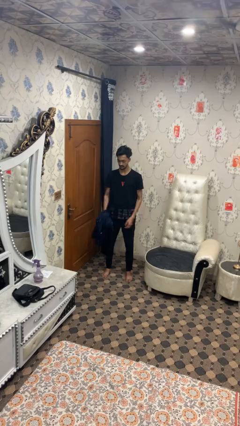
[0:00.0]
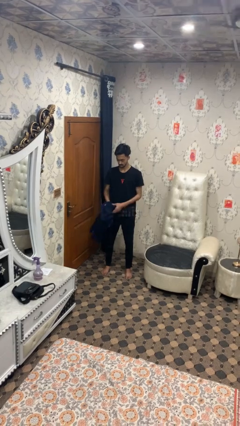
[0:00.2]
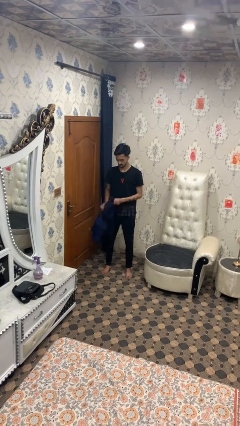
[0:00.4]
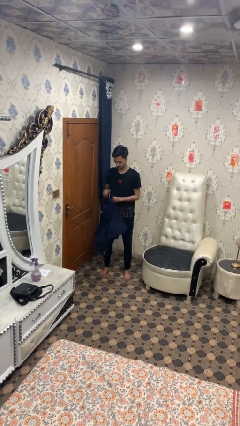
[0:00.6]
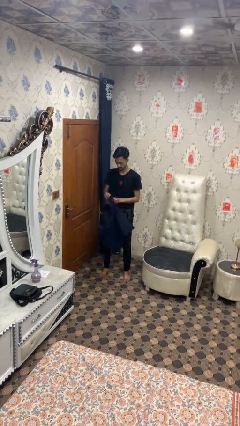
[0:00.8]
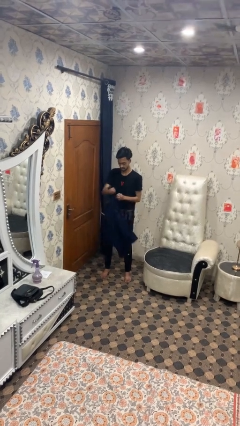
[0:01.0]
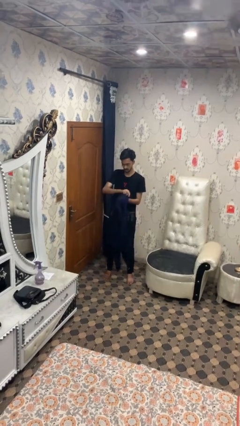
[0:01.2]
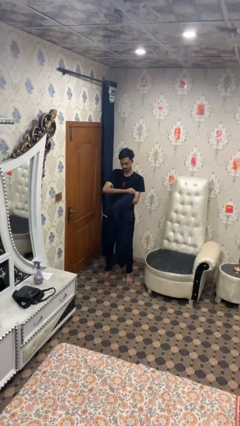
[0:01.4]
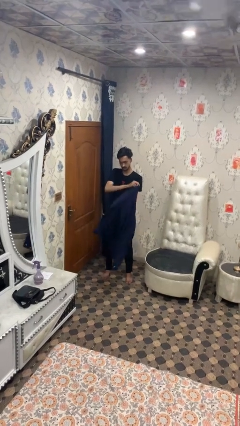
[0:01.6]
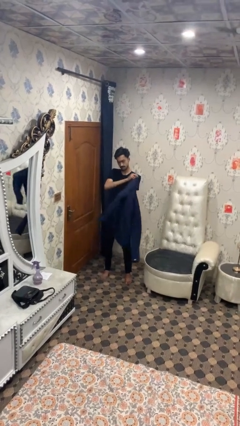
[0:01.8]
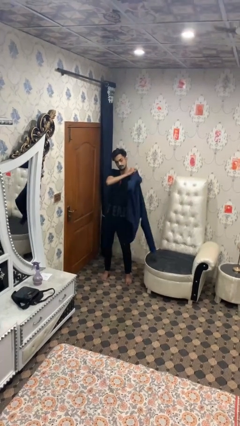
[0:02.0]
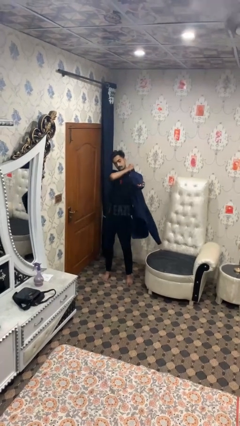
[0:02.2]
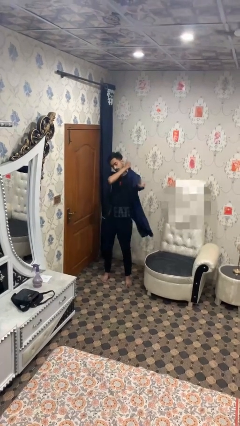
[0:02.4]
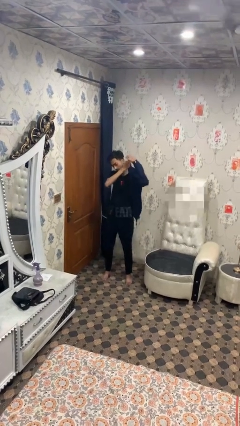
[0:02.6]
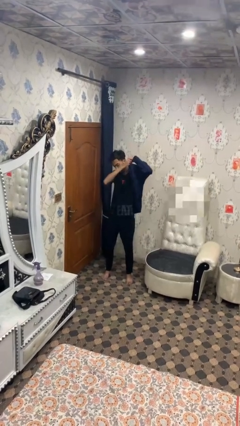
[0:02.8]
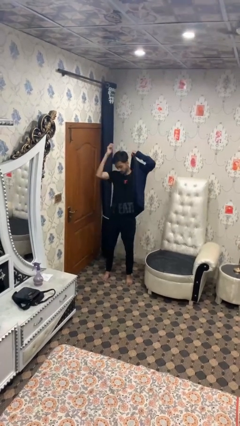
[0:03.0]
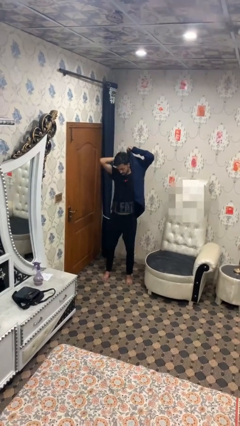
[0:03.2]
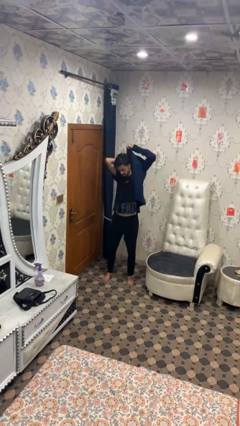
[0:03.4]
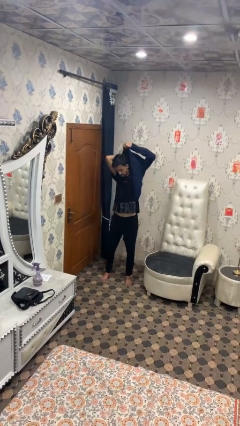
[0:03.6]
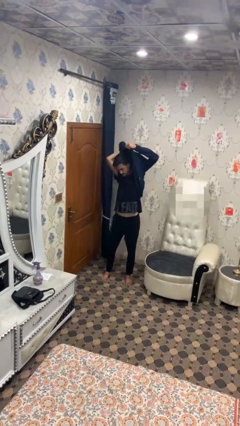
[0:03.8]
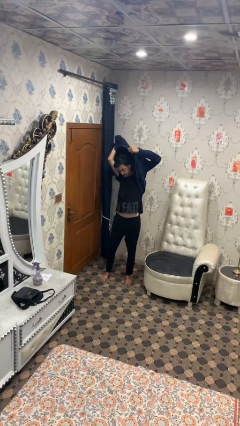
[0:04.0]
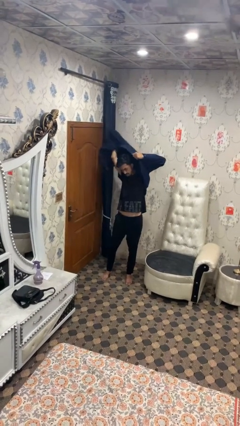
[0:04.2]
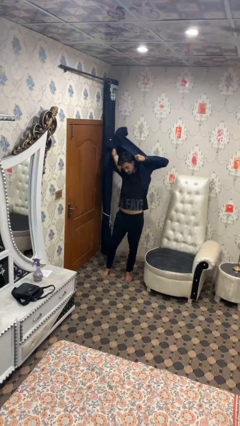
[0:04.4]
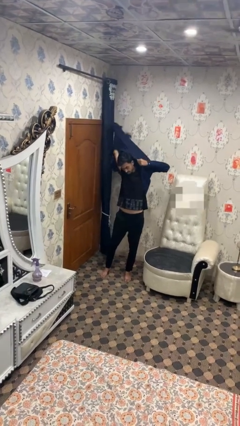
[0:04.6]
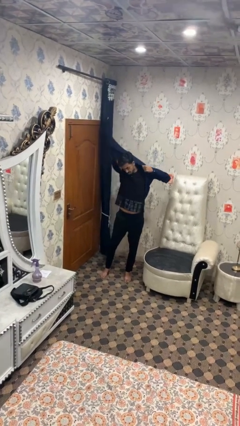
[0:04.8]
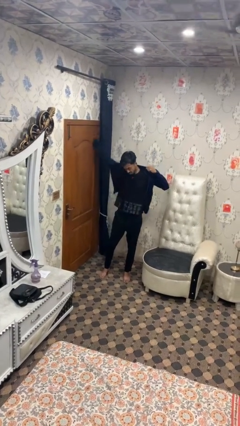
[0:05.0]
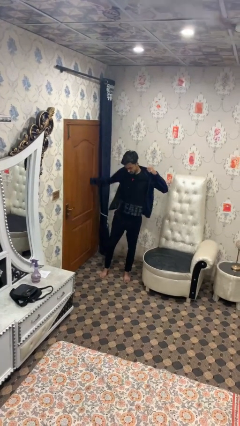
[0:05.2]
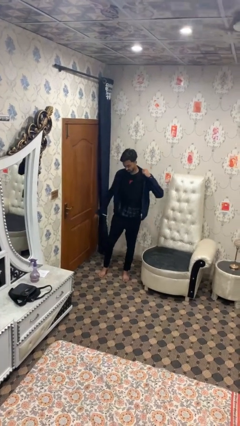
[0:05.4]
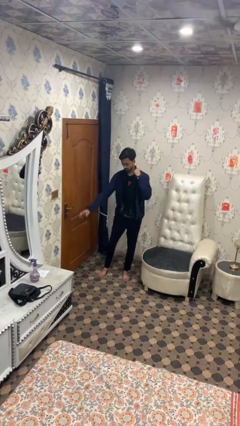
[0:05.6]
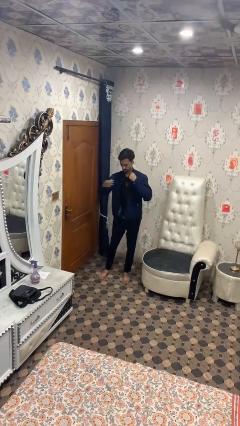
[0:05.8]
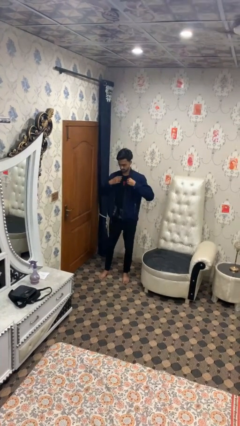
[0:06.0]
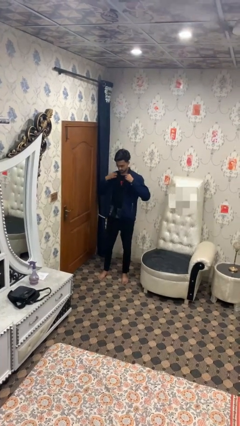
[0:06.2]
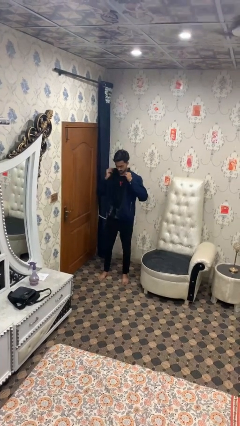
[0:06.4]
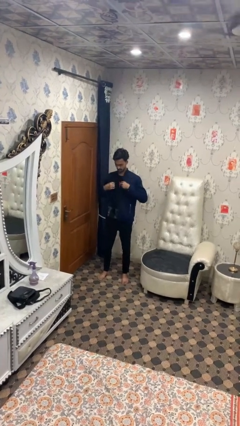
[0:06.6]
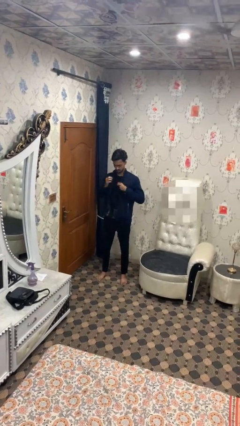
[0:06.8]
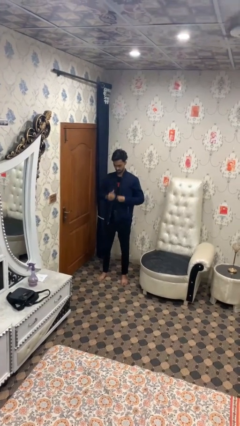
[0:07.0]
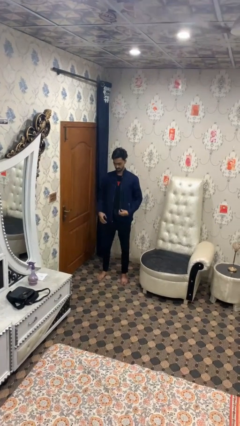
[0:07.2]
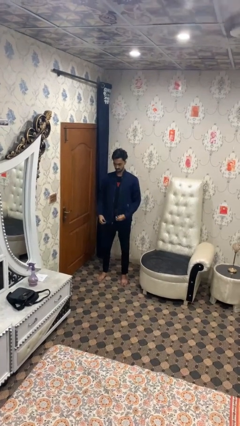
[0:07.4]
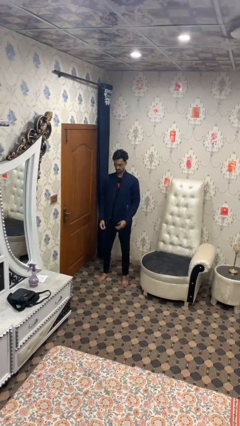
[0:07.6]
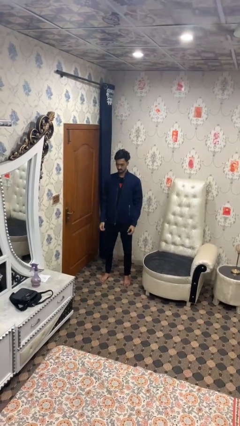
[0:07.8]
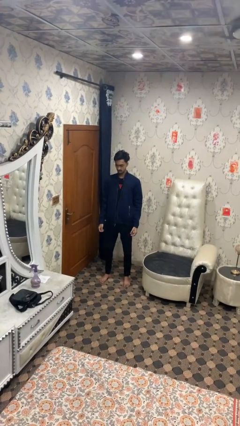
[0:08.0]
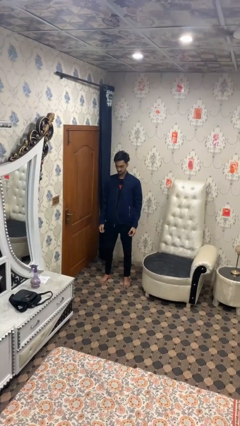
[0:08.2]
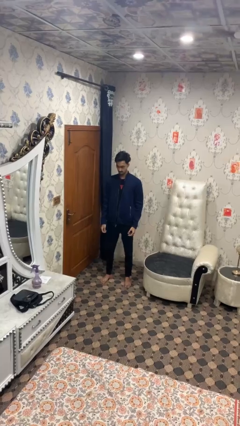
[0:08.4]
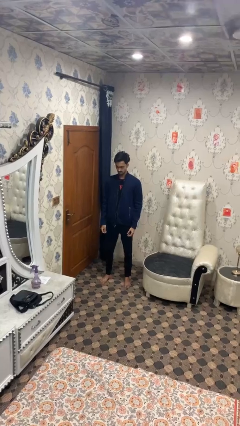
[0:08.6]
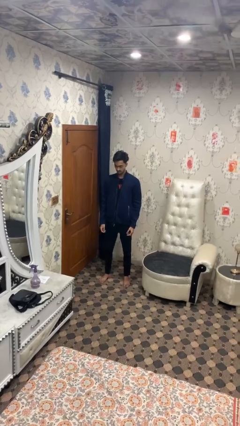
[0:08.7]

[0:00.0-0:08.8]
person puts on jacket

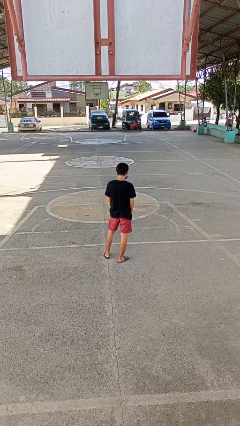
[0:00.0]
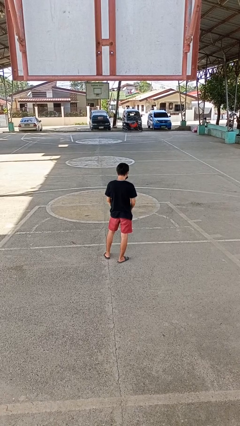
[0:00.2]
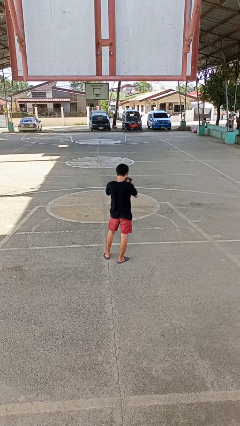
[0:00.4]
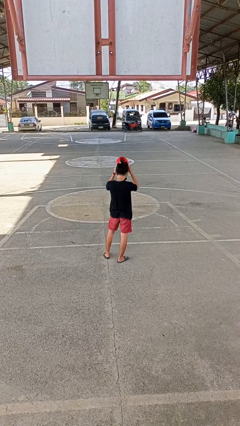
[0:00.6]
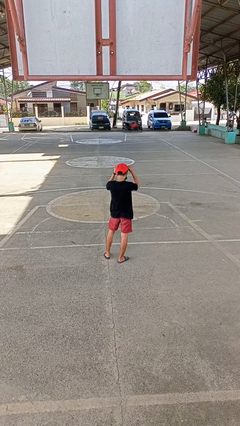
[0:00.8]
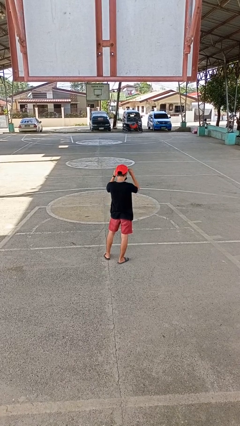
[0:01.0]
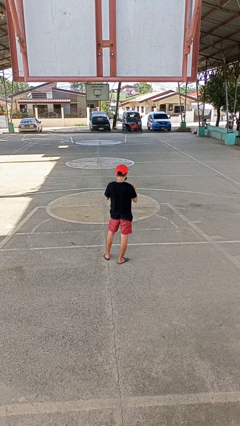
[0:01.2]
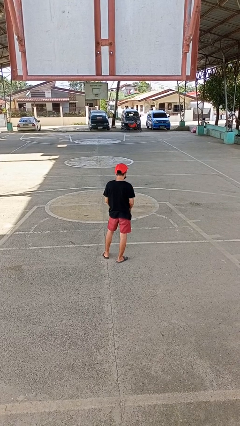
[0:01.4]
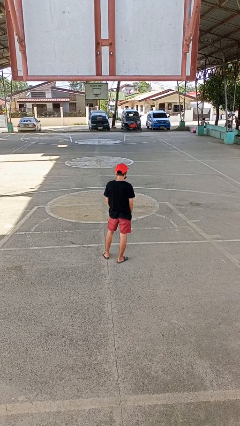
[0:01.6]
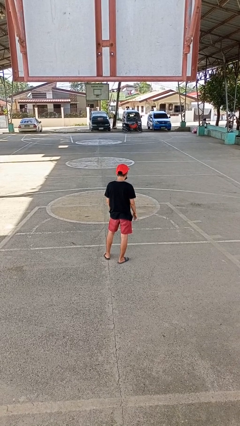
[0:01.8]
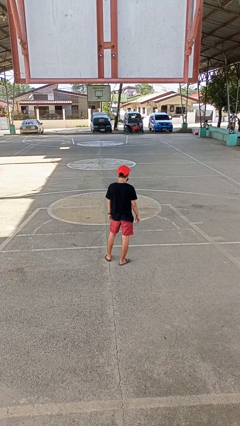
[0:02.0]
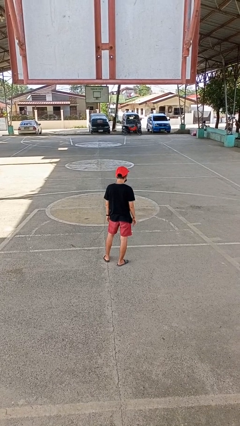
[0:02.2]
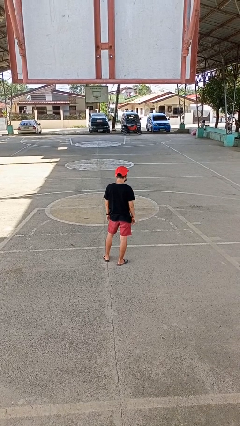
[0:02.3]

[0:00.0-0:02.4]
person puts on hat

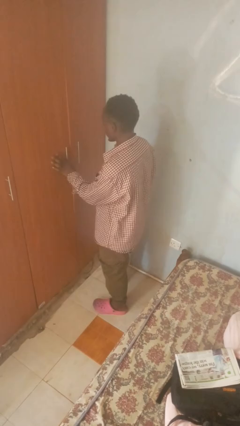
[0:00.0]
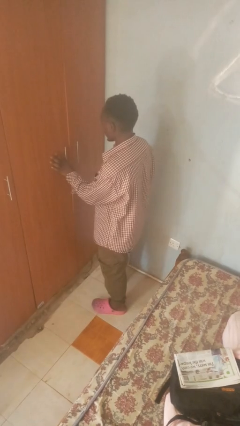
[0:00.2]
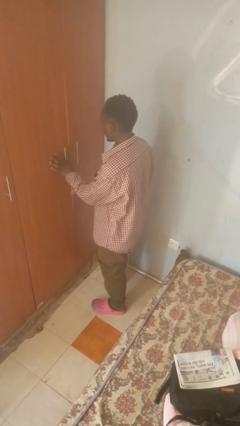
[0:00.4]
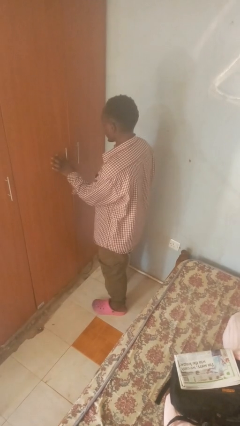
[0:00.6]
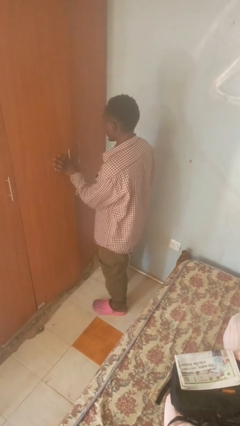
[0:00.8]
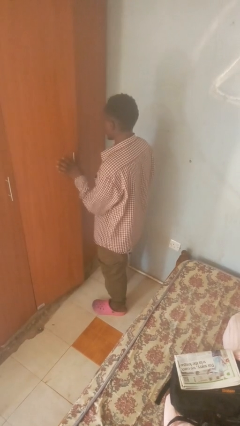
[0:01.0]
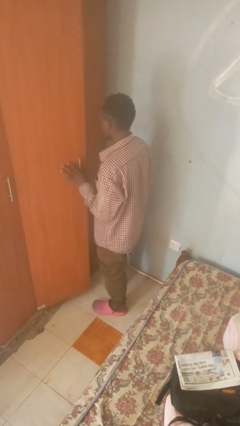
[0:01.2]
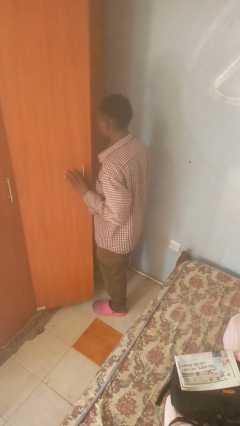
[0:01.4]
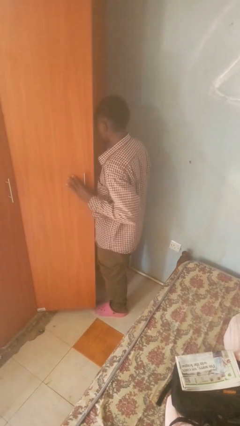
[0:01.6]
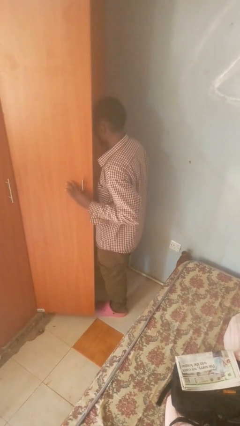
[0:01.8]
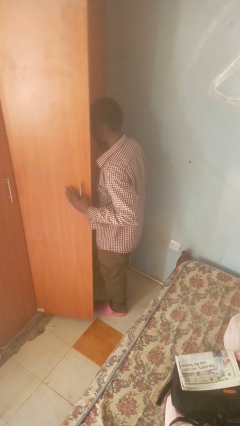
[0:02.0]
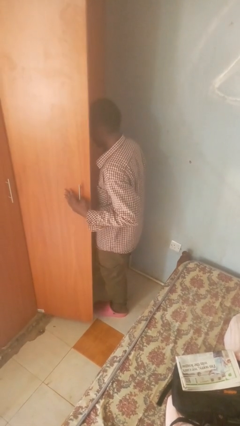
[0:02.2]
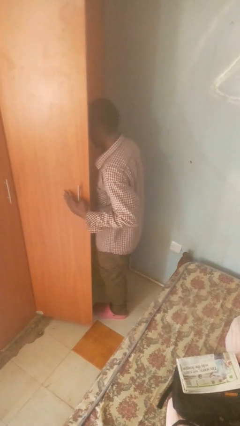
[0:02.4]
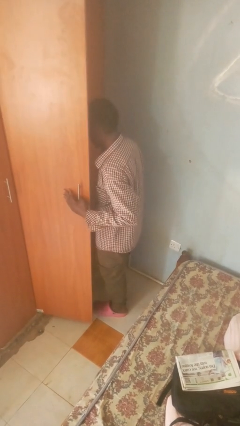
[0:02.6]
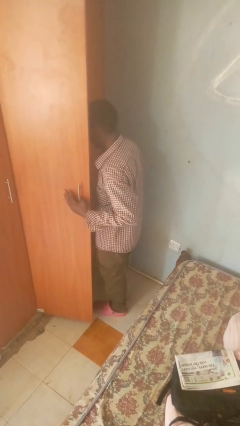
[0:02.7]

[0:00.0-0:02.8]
person opens closet door

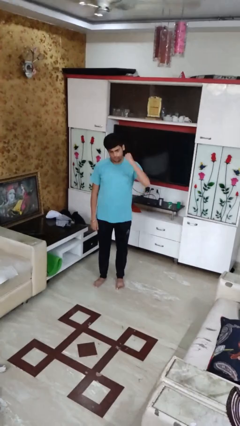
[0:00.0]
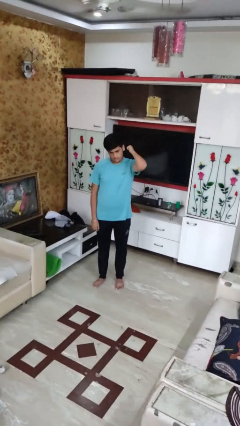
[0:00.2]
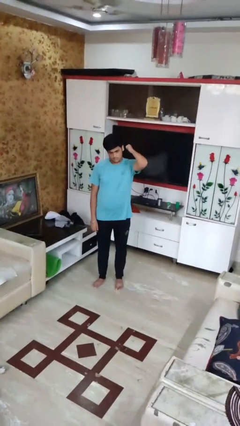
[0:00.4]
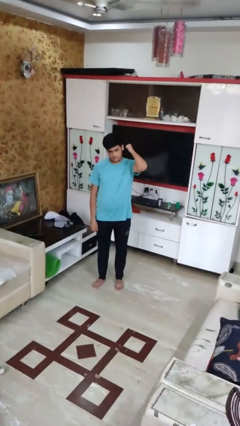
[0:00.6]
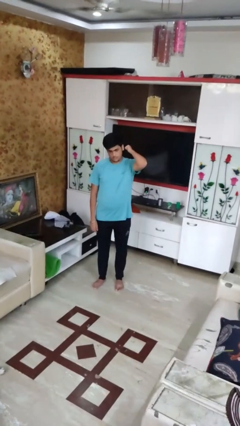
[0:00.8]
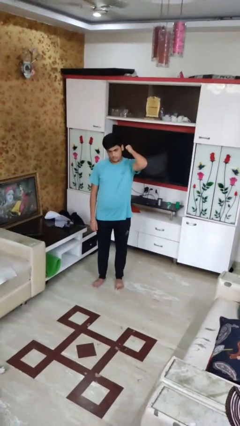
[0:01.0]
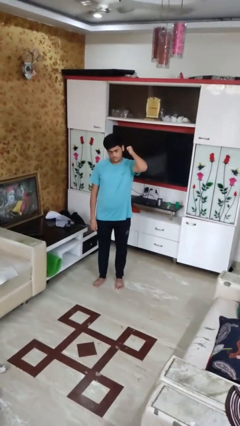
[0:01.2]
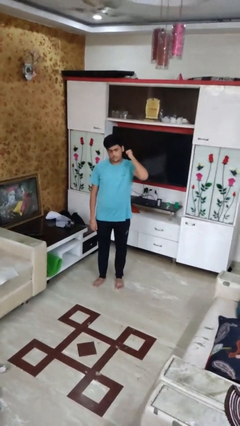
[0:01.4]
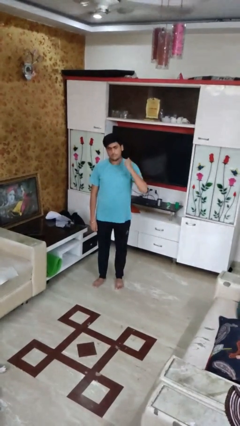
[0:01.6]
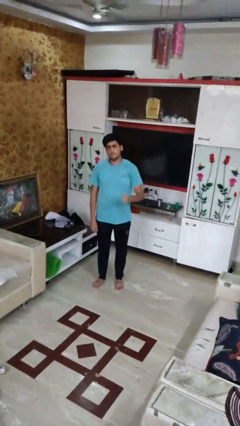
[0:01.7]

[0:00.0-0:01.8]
person gestures behind me

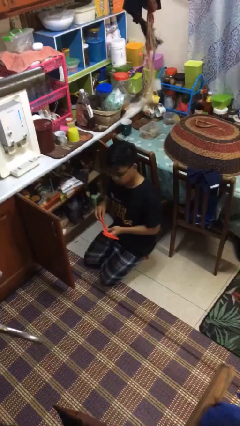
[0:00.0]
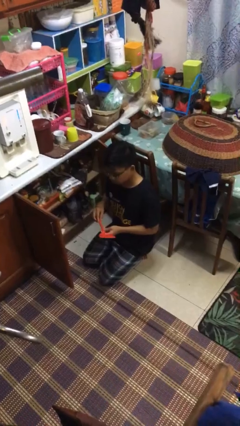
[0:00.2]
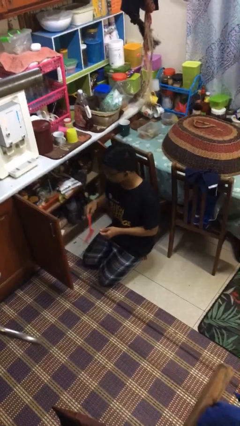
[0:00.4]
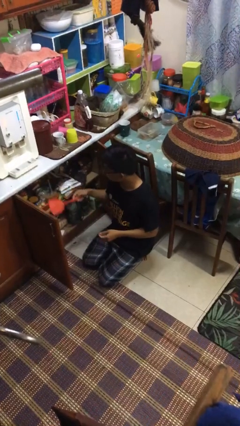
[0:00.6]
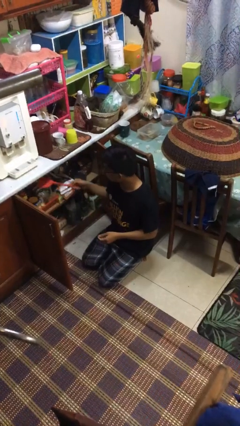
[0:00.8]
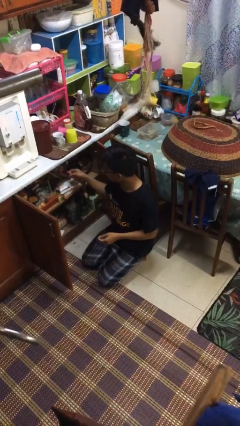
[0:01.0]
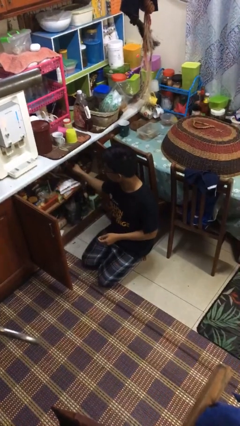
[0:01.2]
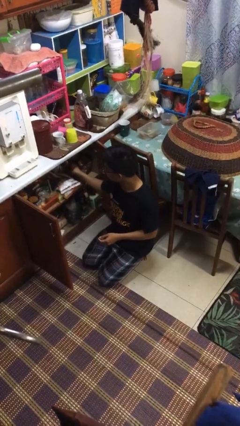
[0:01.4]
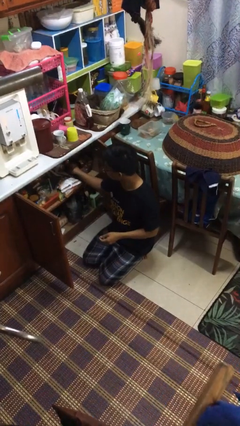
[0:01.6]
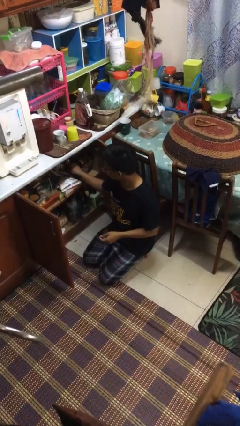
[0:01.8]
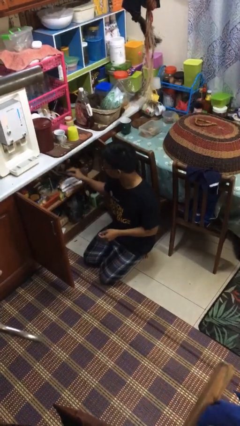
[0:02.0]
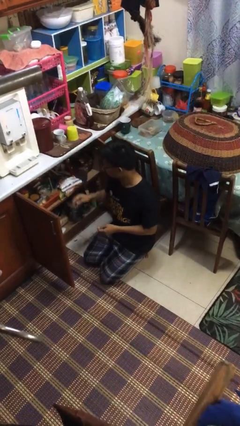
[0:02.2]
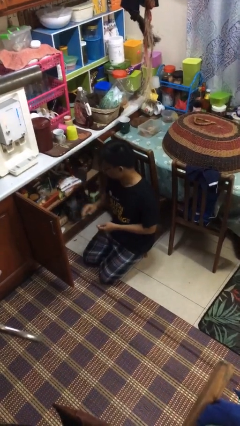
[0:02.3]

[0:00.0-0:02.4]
person puts object into kitchen drawer
